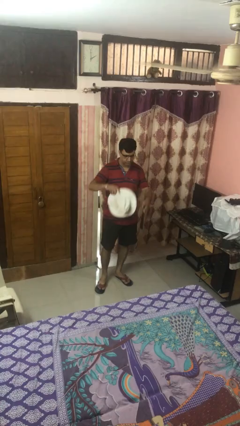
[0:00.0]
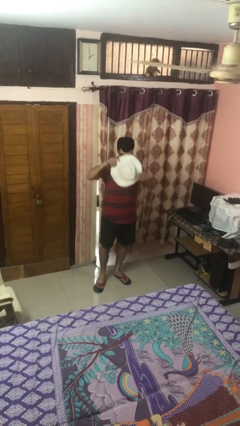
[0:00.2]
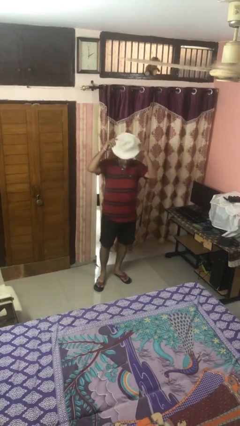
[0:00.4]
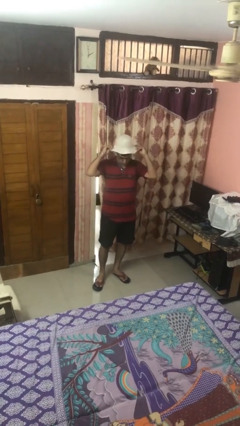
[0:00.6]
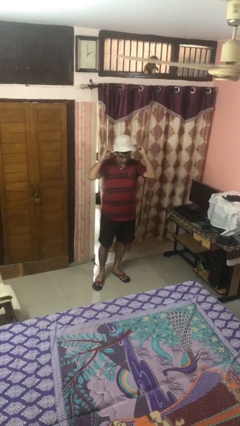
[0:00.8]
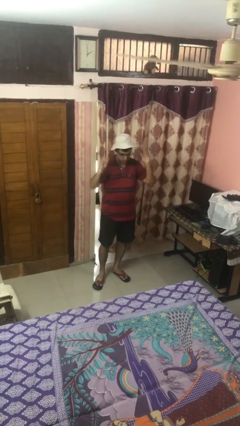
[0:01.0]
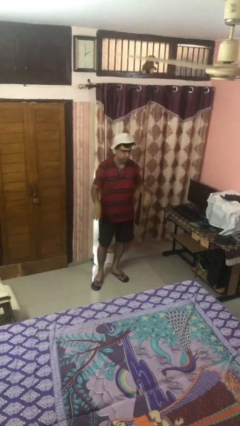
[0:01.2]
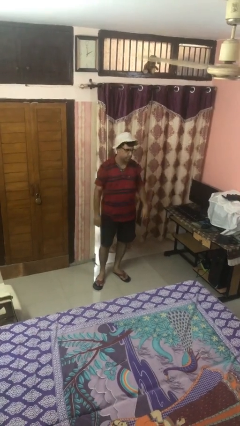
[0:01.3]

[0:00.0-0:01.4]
person puts on hat

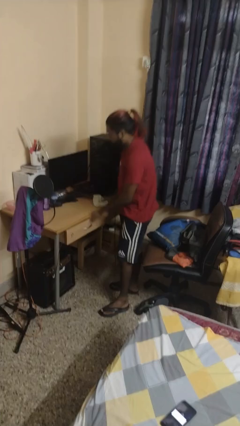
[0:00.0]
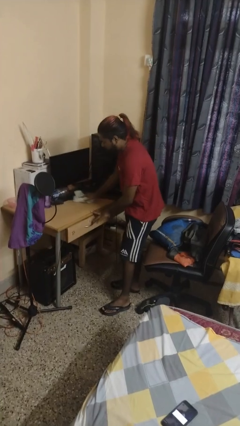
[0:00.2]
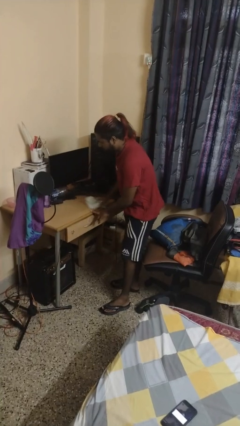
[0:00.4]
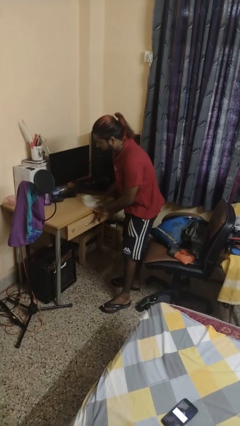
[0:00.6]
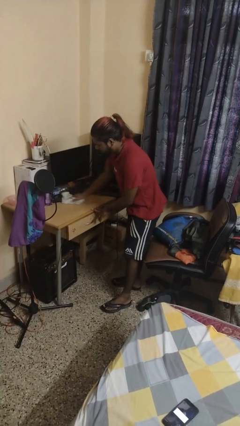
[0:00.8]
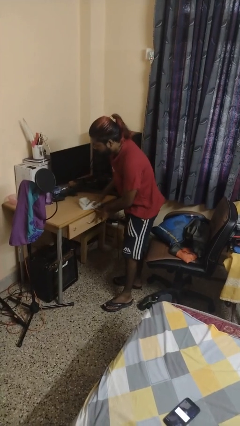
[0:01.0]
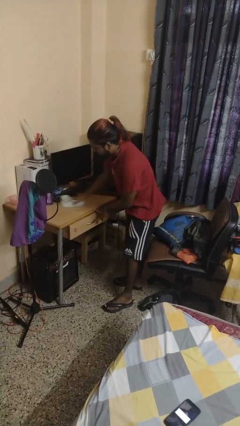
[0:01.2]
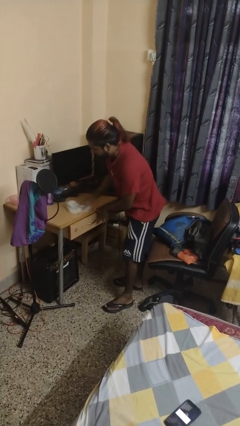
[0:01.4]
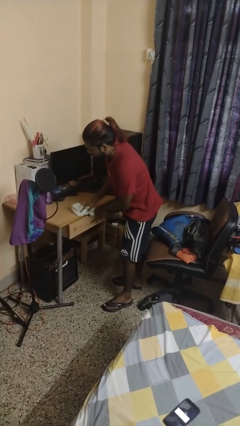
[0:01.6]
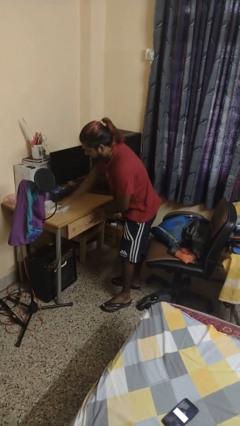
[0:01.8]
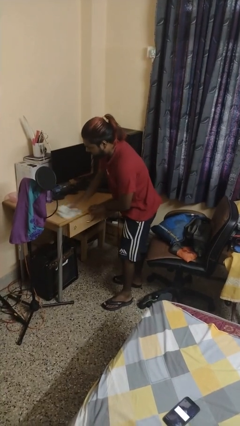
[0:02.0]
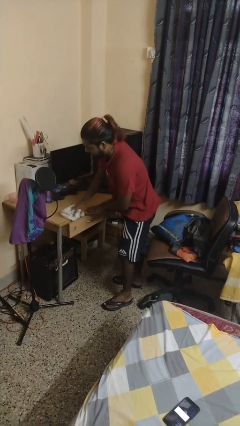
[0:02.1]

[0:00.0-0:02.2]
person cleans table with rag

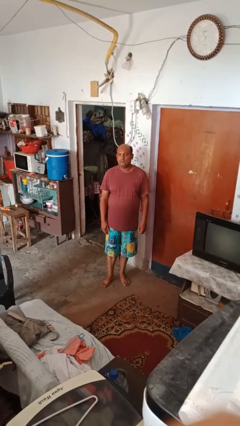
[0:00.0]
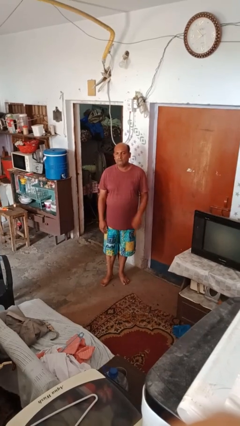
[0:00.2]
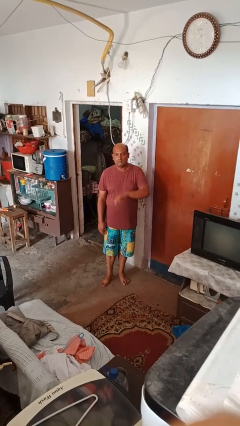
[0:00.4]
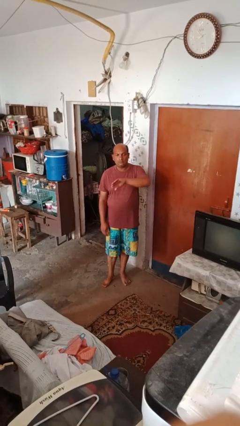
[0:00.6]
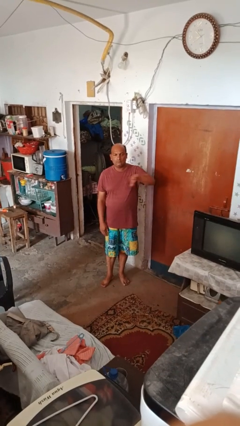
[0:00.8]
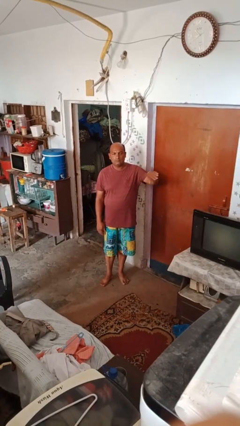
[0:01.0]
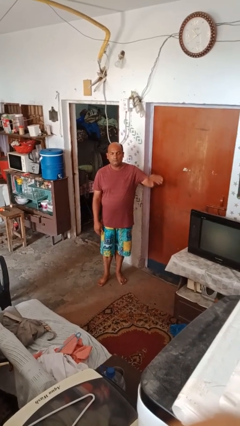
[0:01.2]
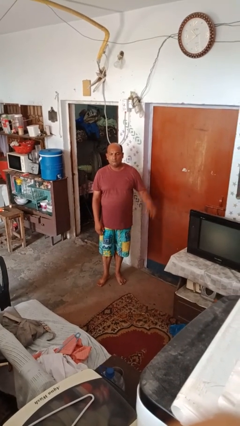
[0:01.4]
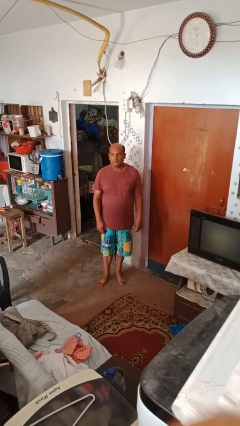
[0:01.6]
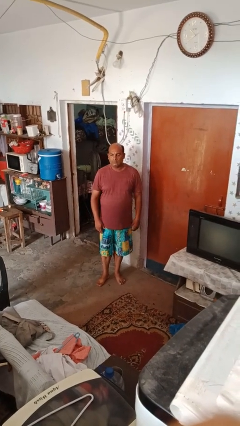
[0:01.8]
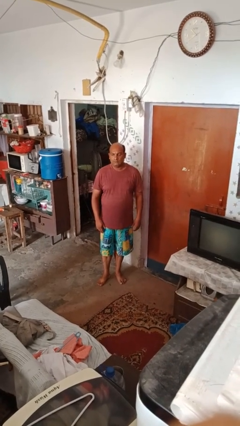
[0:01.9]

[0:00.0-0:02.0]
person gestures swipe right

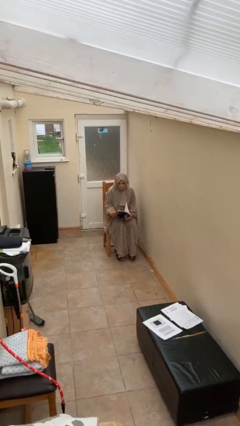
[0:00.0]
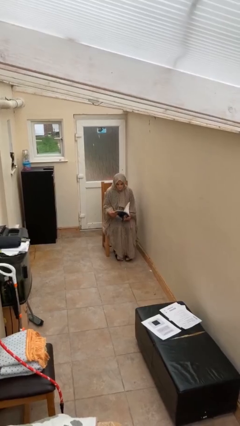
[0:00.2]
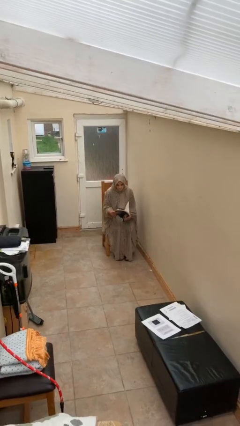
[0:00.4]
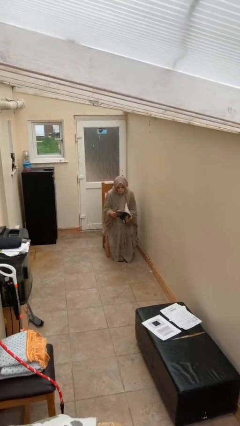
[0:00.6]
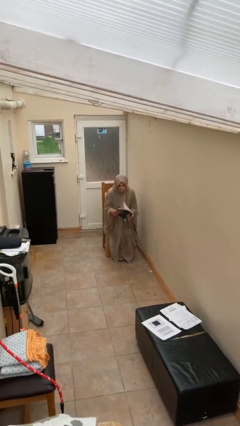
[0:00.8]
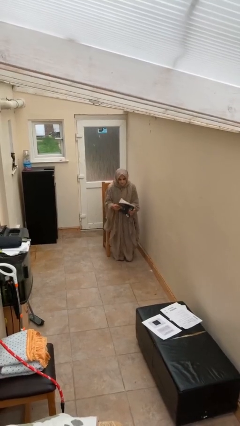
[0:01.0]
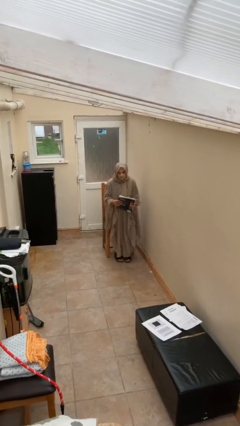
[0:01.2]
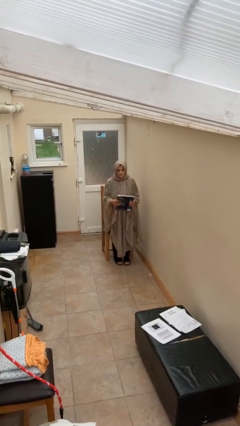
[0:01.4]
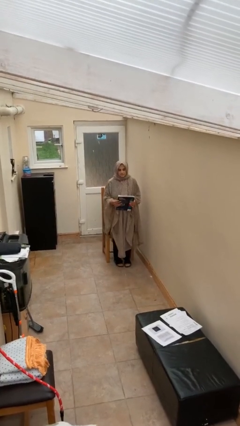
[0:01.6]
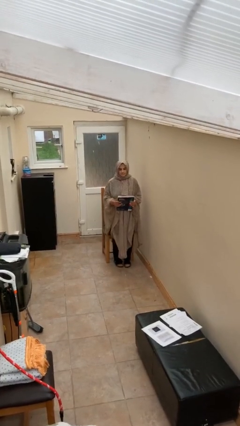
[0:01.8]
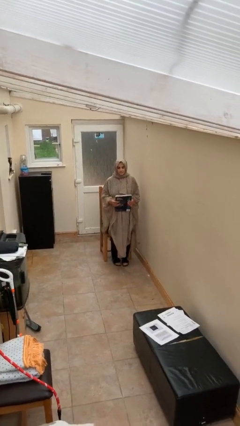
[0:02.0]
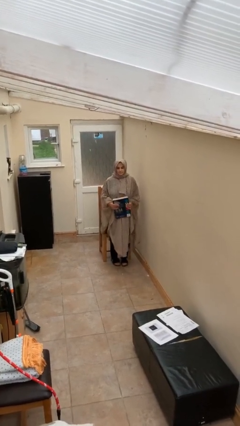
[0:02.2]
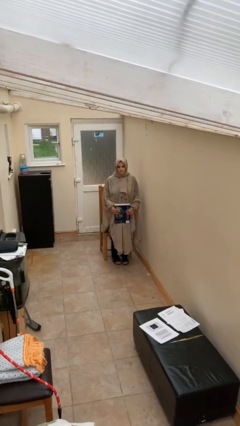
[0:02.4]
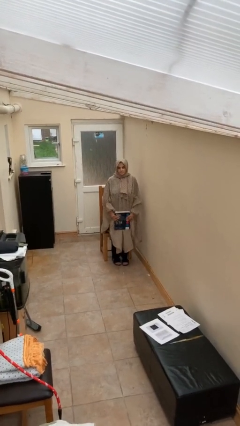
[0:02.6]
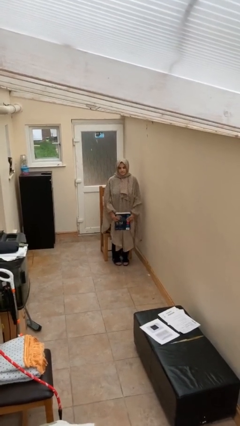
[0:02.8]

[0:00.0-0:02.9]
person stands up

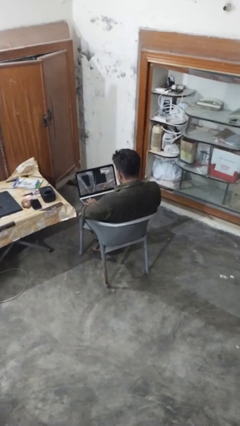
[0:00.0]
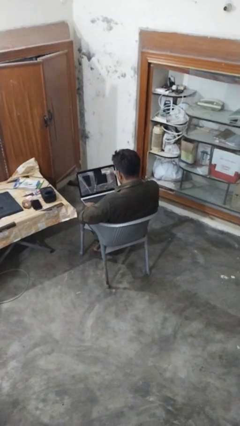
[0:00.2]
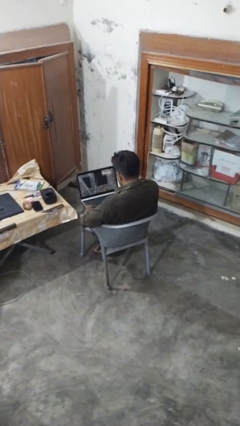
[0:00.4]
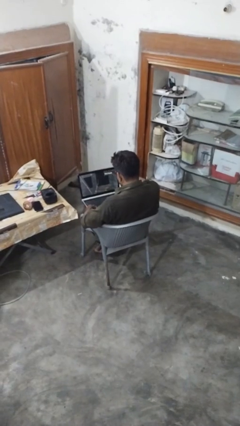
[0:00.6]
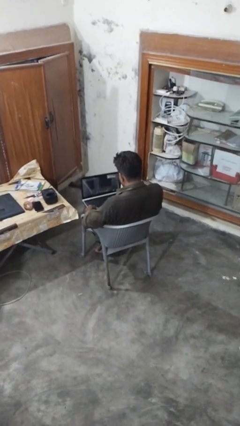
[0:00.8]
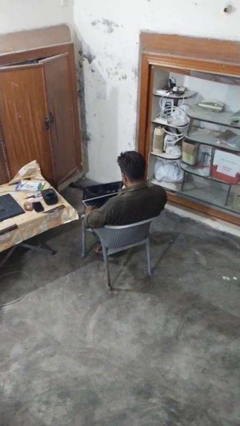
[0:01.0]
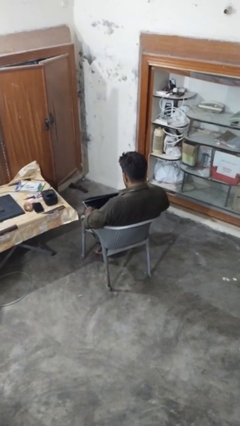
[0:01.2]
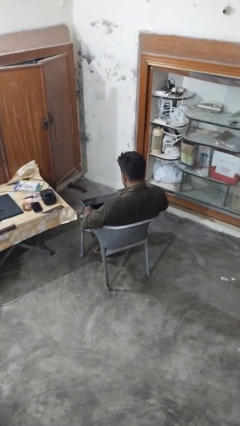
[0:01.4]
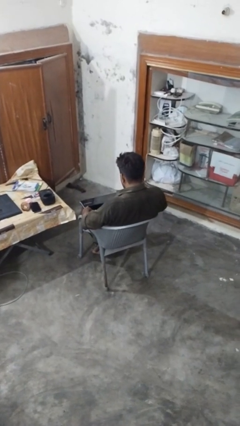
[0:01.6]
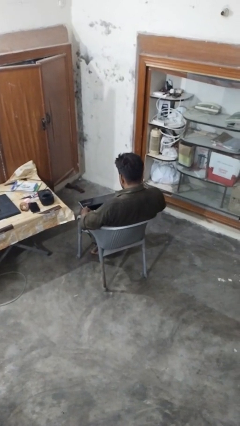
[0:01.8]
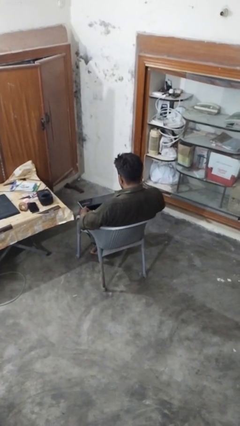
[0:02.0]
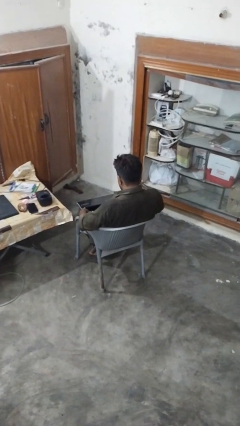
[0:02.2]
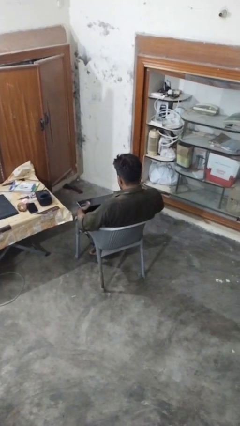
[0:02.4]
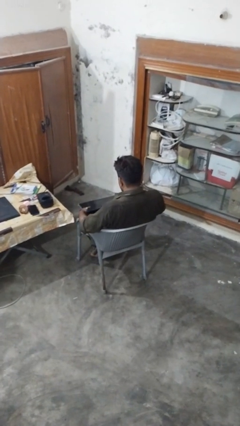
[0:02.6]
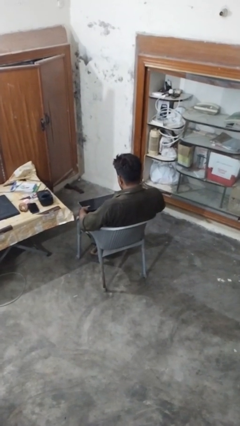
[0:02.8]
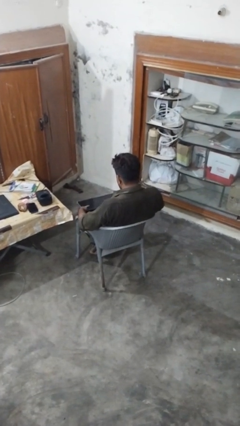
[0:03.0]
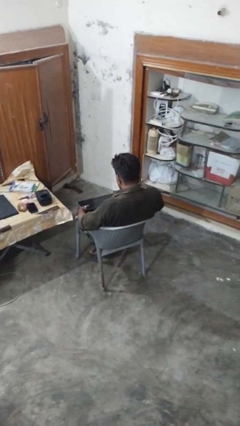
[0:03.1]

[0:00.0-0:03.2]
person closes laptop

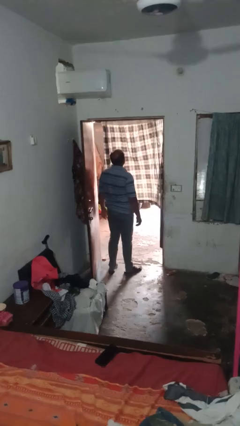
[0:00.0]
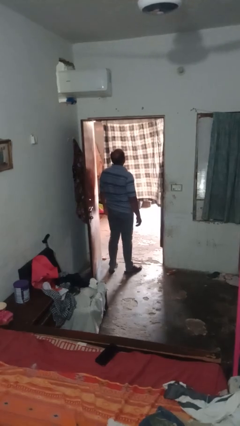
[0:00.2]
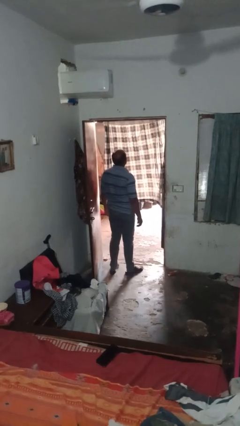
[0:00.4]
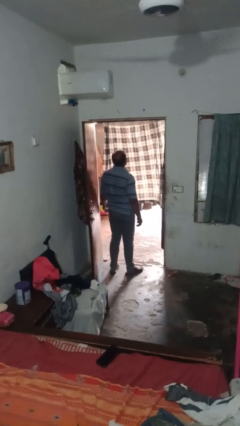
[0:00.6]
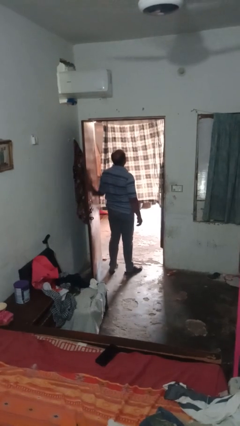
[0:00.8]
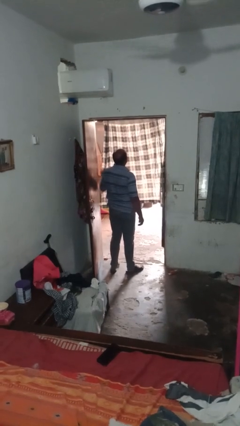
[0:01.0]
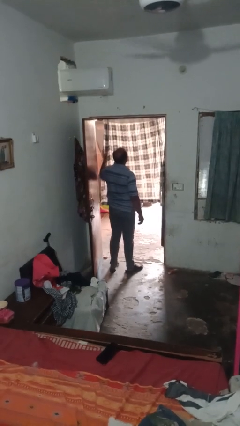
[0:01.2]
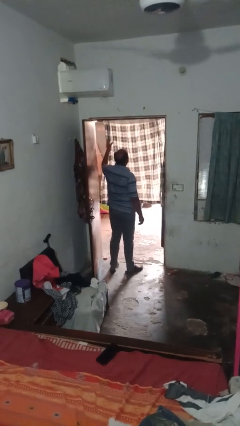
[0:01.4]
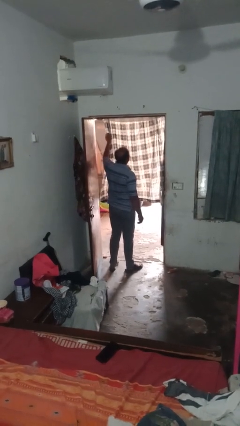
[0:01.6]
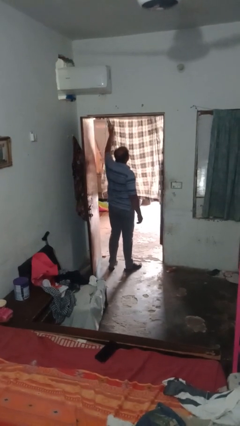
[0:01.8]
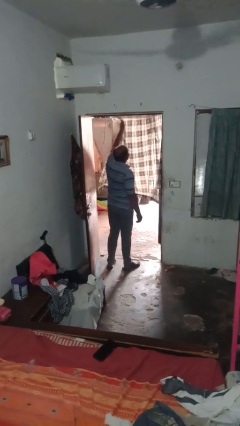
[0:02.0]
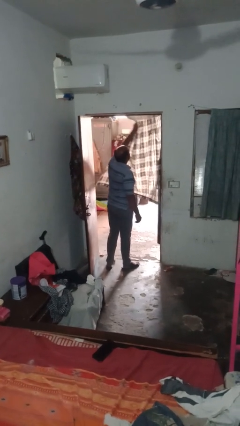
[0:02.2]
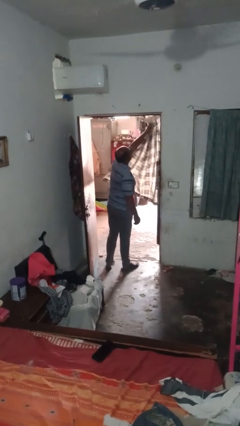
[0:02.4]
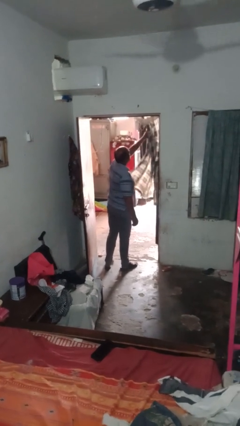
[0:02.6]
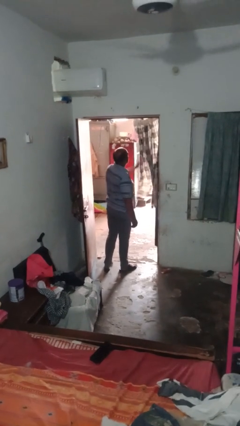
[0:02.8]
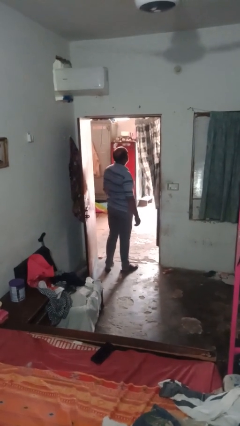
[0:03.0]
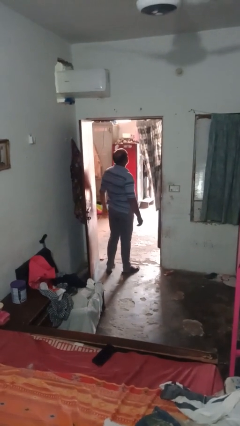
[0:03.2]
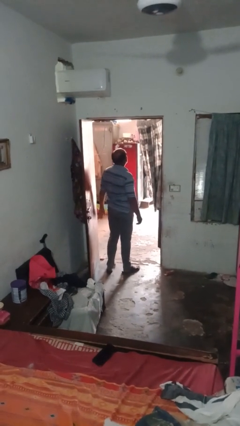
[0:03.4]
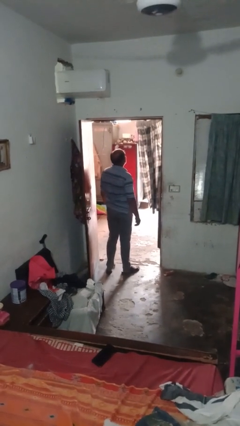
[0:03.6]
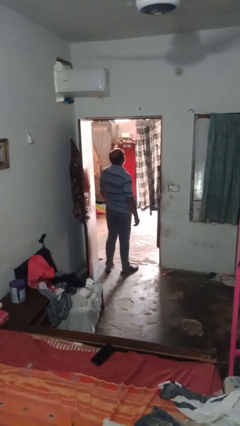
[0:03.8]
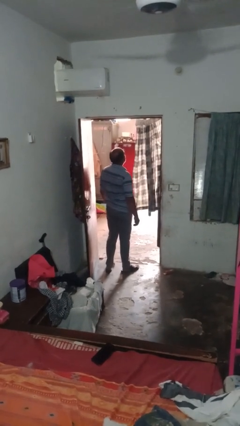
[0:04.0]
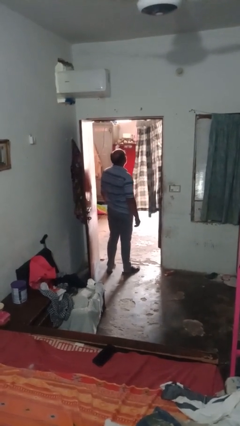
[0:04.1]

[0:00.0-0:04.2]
person opens curtains

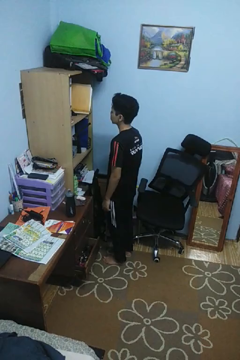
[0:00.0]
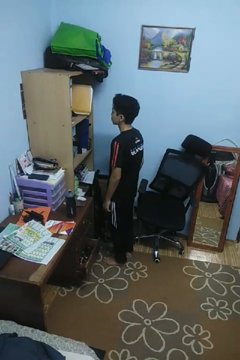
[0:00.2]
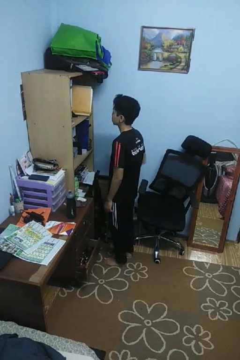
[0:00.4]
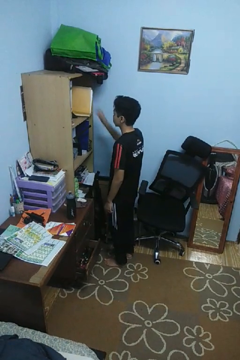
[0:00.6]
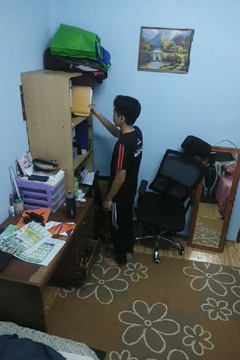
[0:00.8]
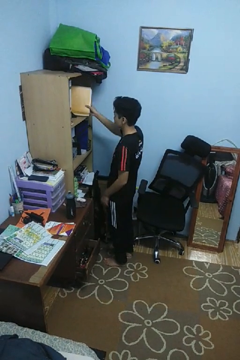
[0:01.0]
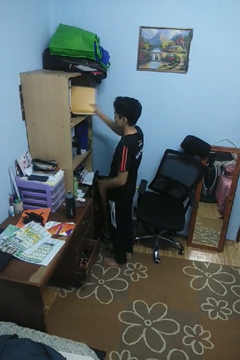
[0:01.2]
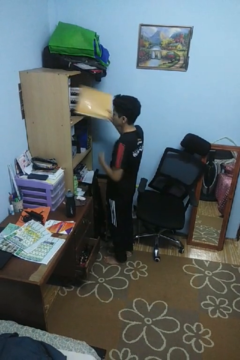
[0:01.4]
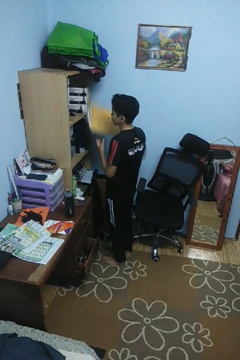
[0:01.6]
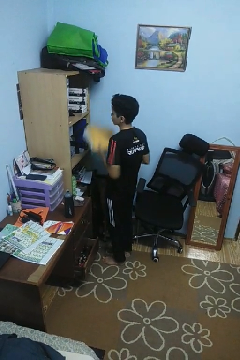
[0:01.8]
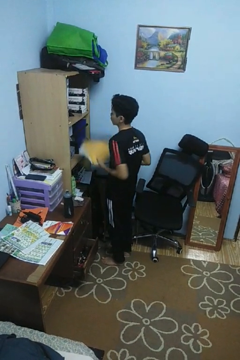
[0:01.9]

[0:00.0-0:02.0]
person picks up object from cabinet
